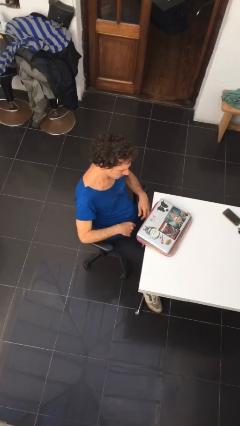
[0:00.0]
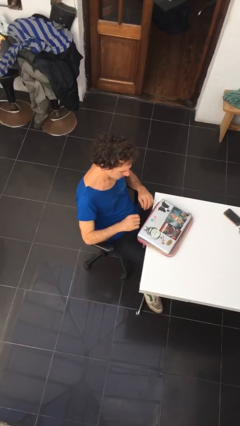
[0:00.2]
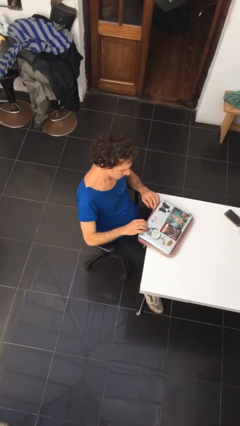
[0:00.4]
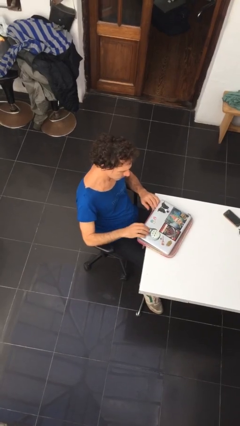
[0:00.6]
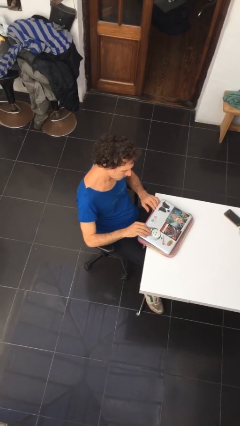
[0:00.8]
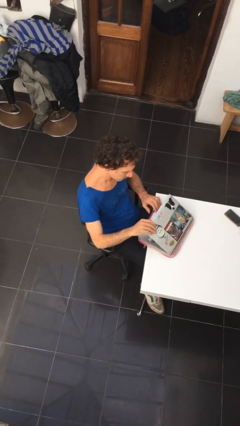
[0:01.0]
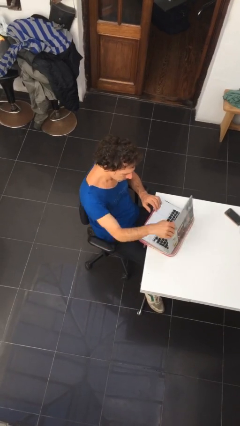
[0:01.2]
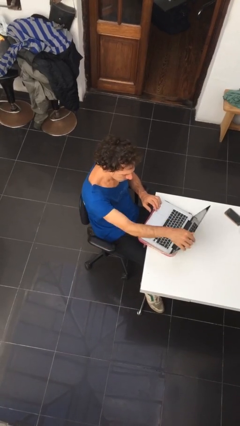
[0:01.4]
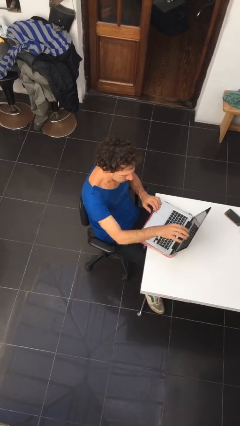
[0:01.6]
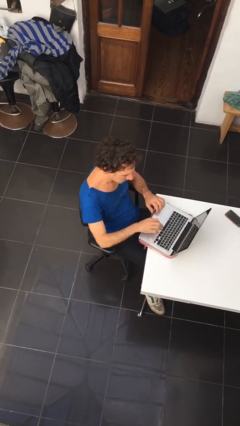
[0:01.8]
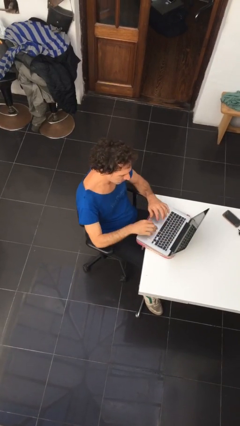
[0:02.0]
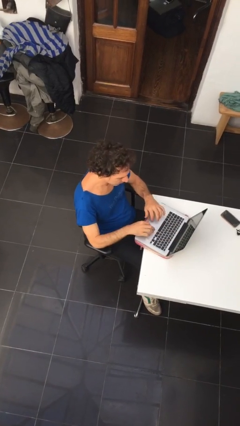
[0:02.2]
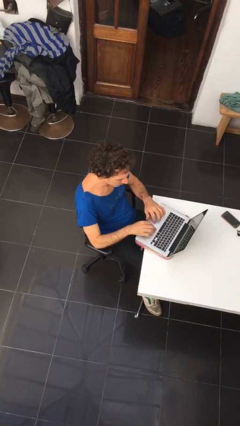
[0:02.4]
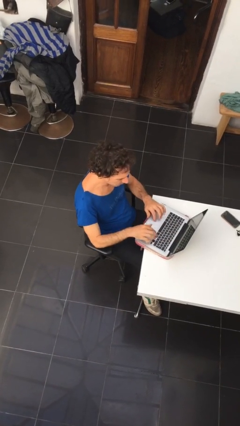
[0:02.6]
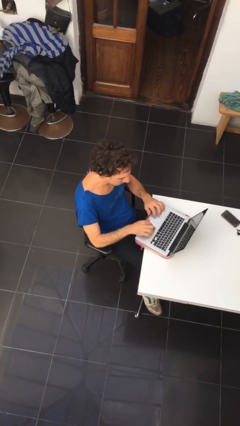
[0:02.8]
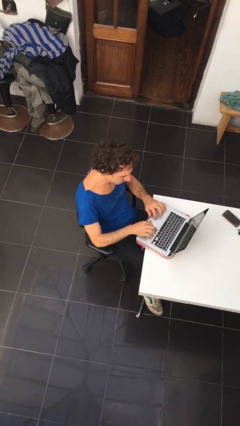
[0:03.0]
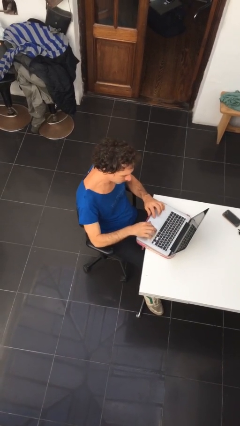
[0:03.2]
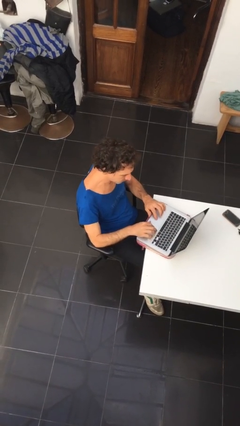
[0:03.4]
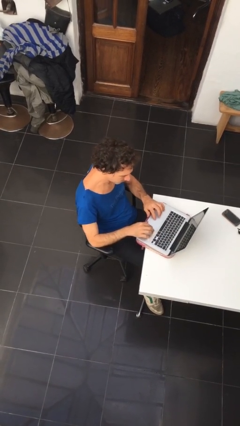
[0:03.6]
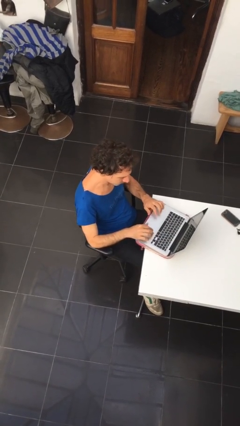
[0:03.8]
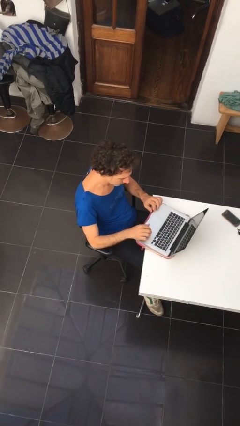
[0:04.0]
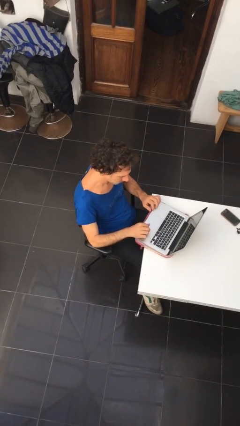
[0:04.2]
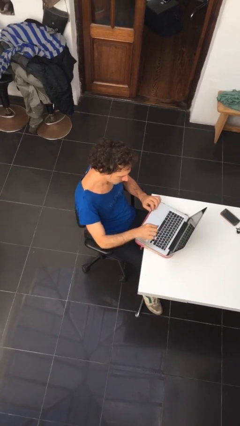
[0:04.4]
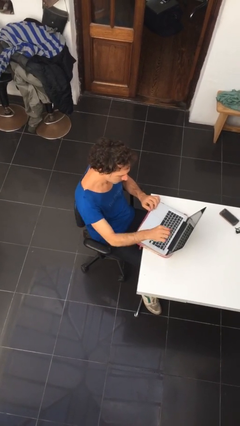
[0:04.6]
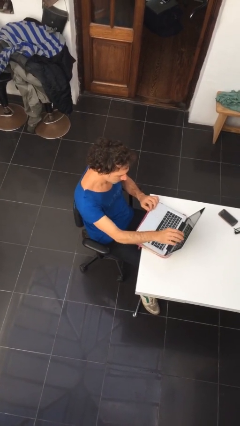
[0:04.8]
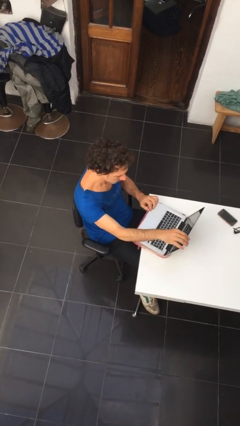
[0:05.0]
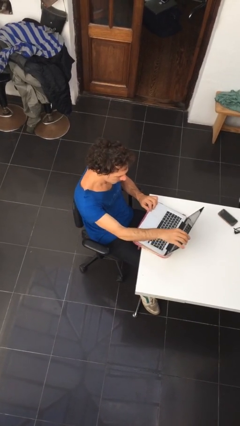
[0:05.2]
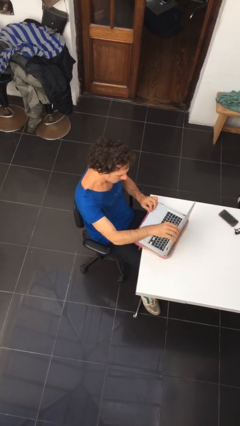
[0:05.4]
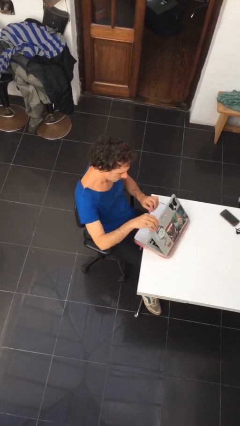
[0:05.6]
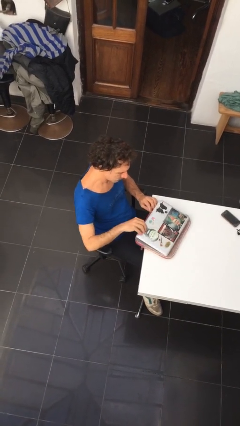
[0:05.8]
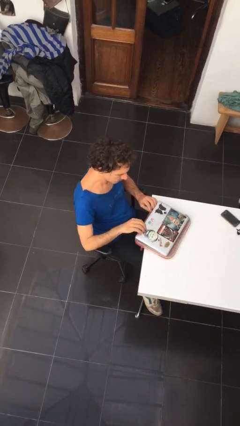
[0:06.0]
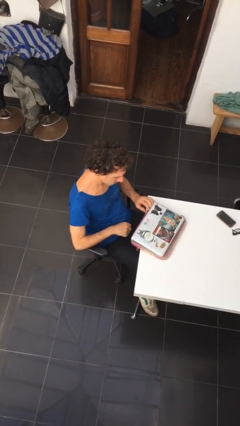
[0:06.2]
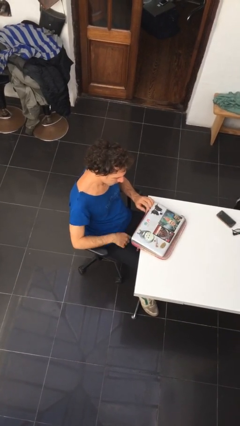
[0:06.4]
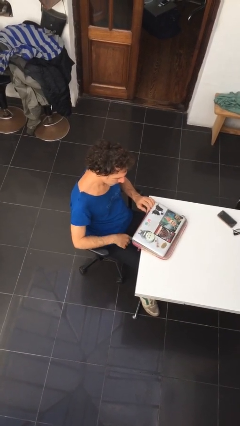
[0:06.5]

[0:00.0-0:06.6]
person interacts with laptop

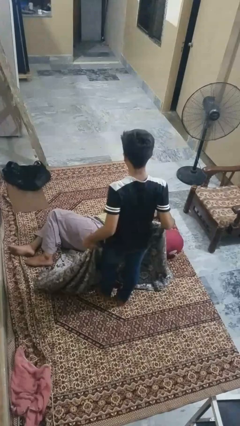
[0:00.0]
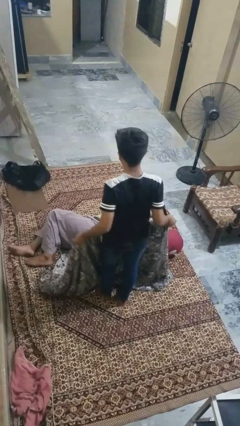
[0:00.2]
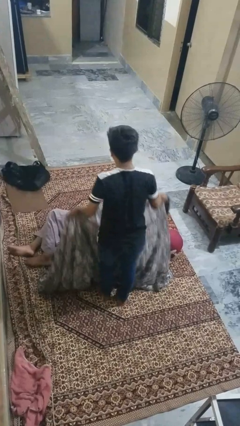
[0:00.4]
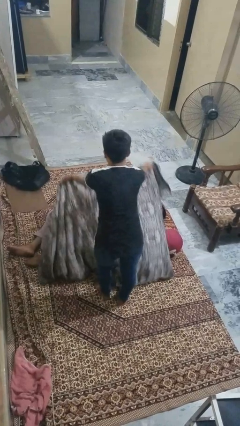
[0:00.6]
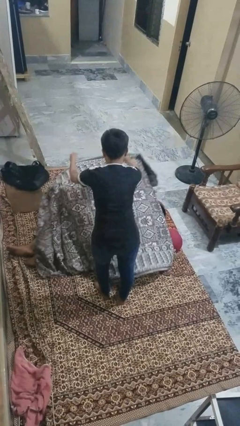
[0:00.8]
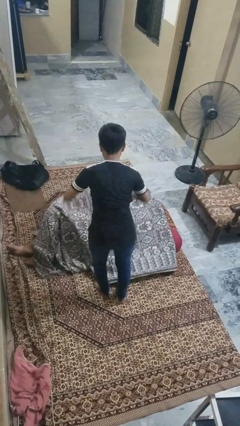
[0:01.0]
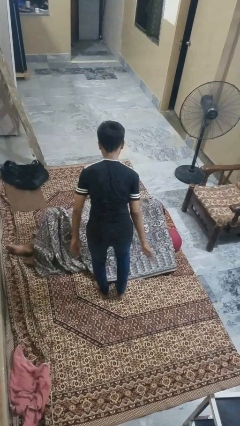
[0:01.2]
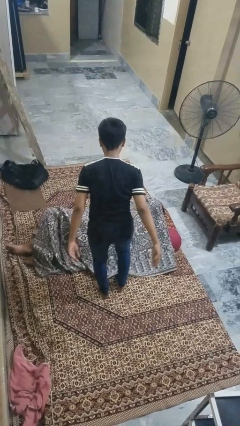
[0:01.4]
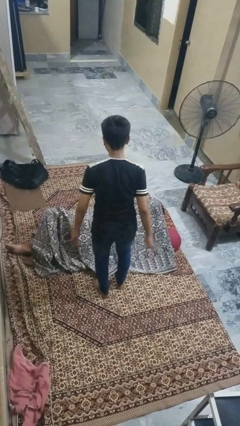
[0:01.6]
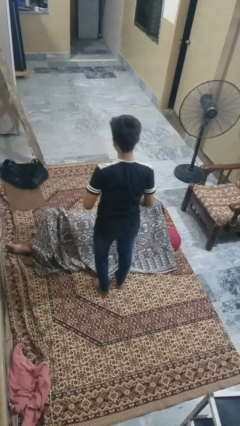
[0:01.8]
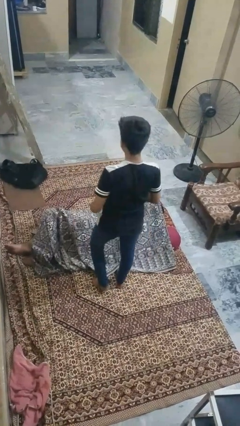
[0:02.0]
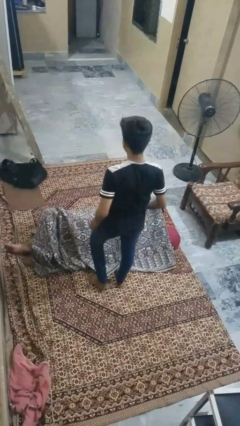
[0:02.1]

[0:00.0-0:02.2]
person covers friend with blanket

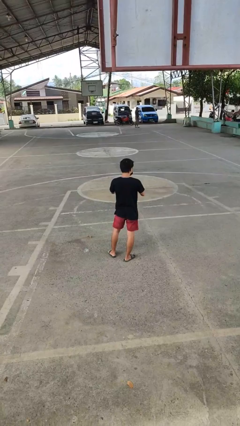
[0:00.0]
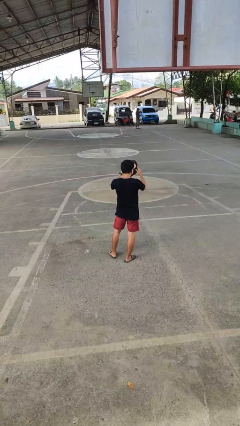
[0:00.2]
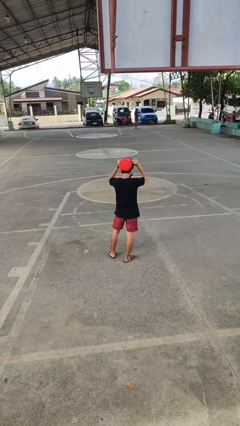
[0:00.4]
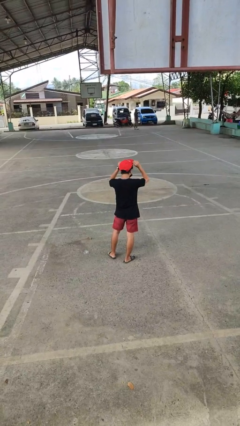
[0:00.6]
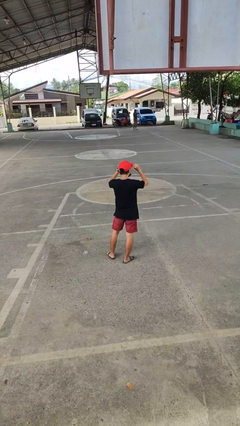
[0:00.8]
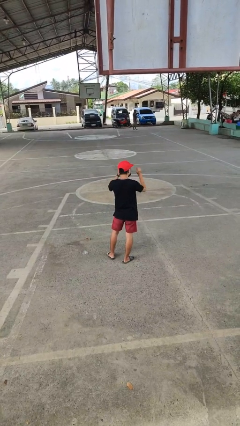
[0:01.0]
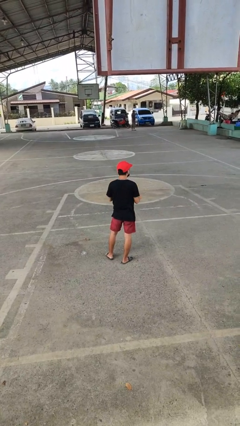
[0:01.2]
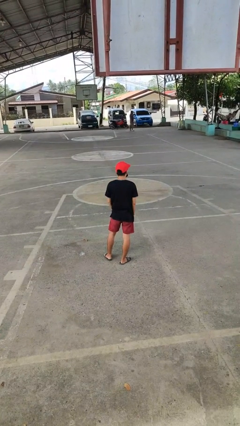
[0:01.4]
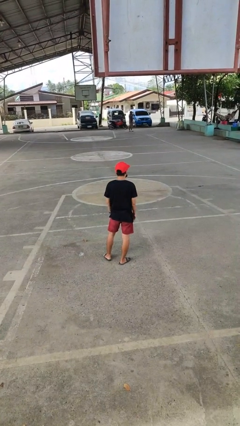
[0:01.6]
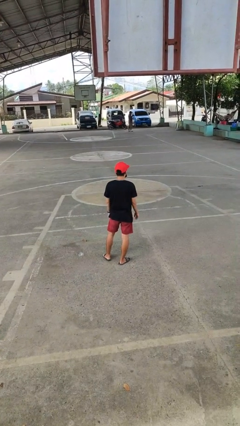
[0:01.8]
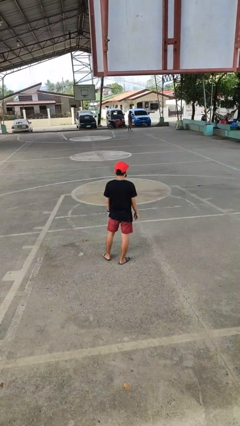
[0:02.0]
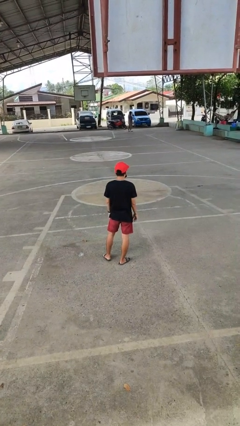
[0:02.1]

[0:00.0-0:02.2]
person puts on hat

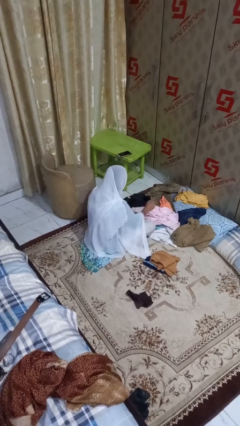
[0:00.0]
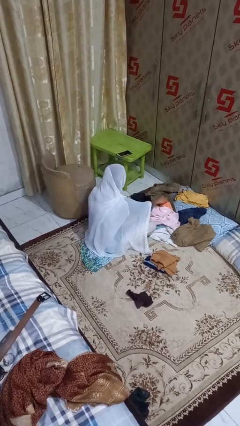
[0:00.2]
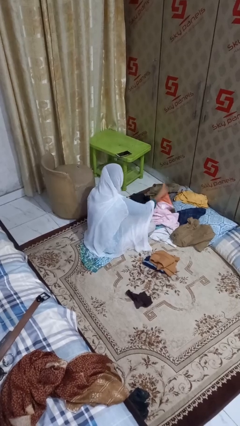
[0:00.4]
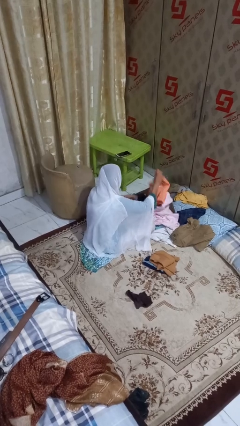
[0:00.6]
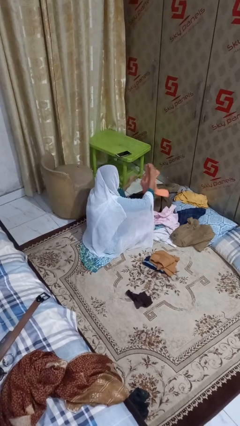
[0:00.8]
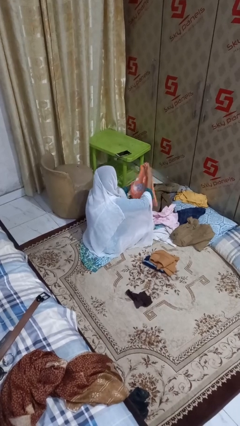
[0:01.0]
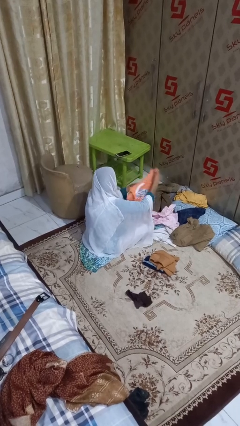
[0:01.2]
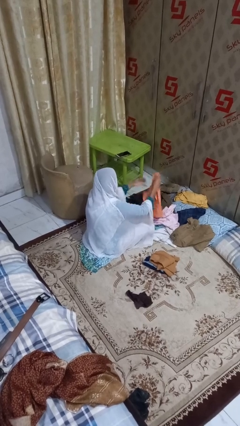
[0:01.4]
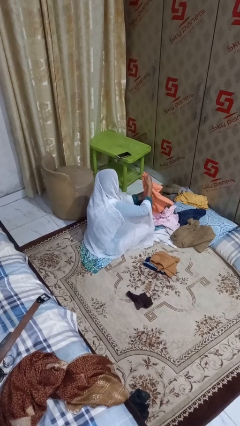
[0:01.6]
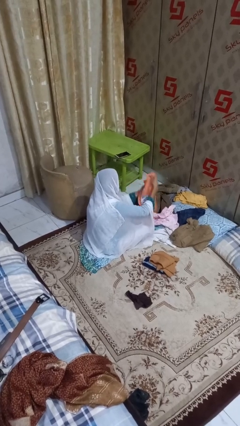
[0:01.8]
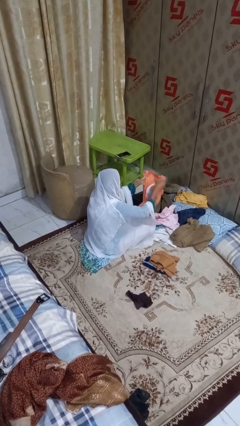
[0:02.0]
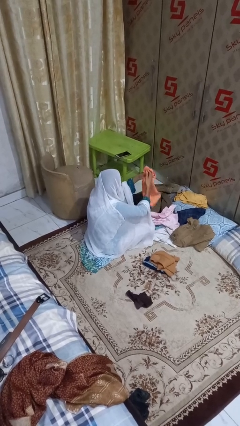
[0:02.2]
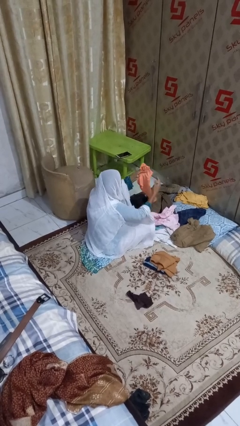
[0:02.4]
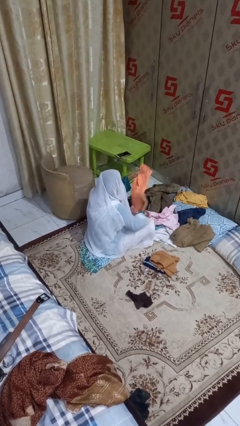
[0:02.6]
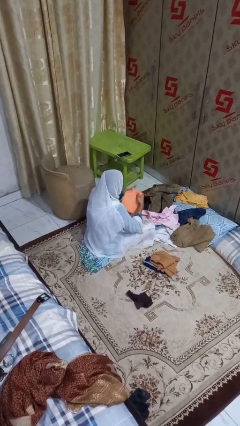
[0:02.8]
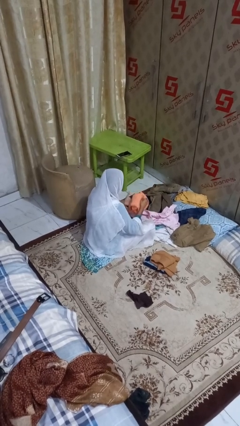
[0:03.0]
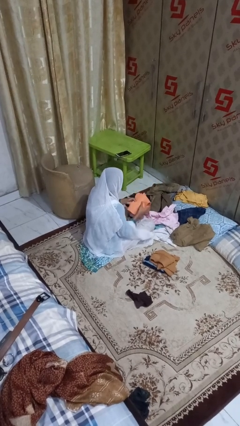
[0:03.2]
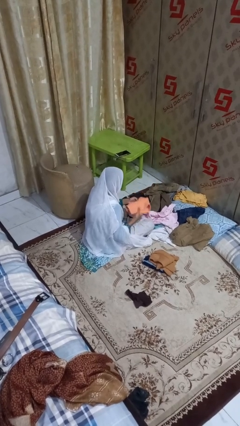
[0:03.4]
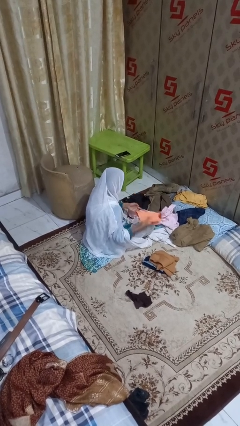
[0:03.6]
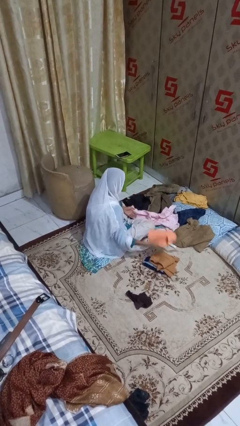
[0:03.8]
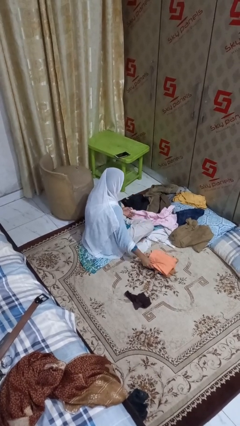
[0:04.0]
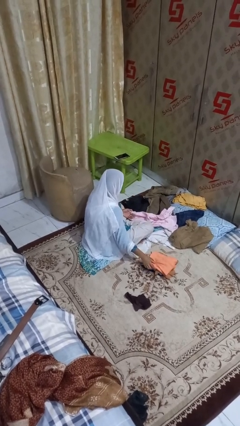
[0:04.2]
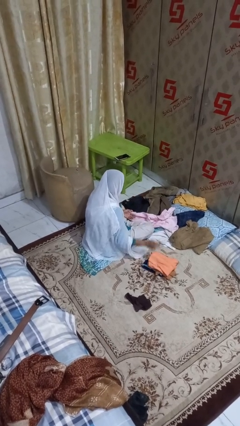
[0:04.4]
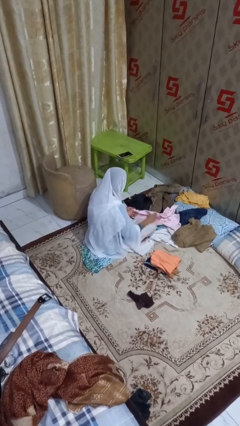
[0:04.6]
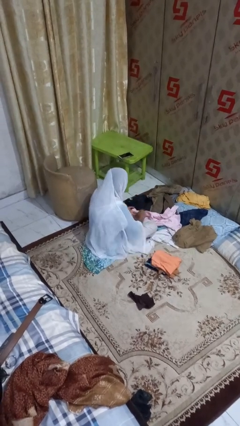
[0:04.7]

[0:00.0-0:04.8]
person folds shirt

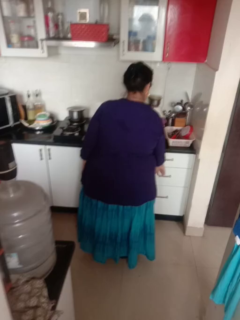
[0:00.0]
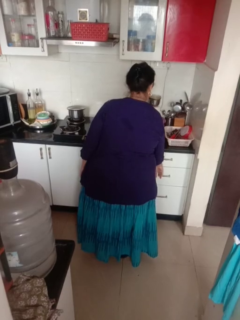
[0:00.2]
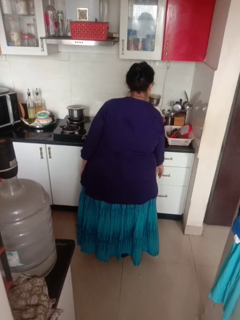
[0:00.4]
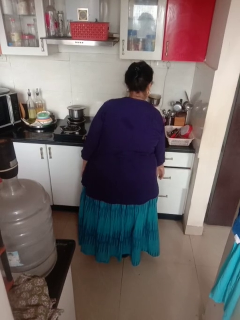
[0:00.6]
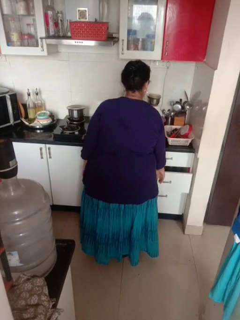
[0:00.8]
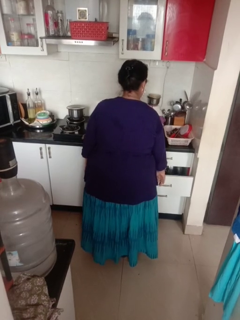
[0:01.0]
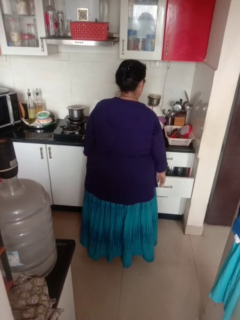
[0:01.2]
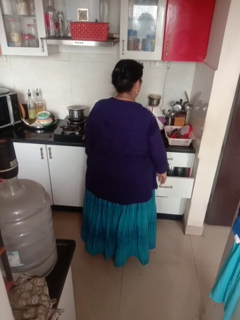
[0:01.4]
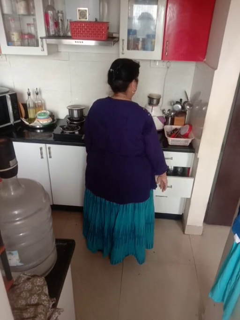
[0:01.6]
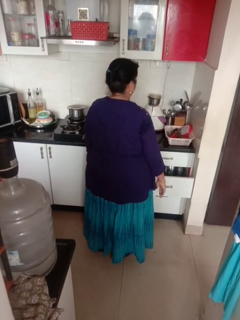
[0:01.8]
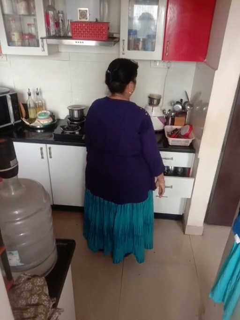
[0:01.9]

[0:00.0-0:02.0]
person opens kitchen drawer

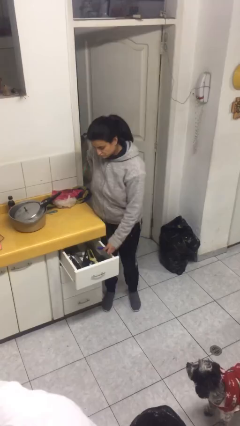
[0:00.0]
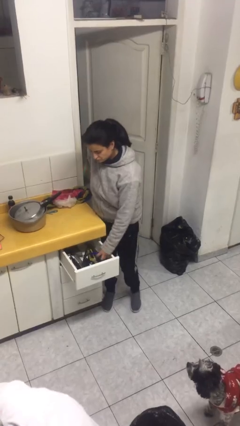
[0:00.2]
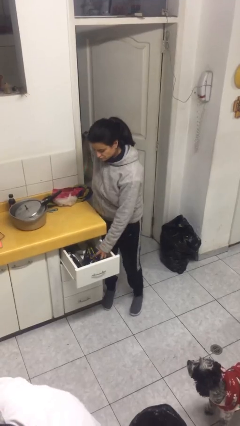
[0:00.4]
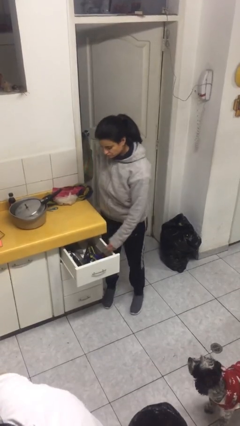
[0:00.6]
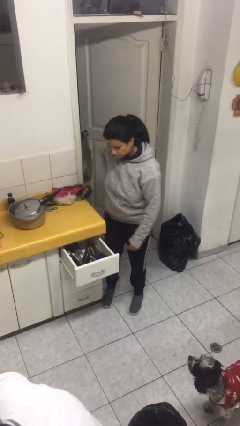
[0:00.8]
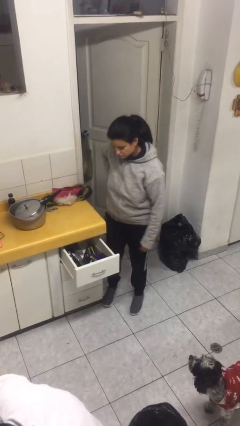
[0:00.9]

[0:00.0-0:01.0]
person puts object into kitchen drawer
